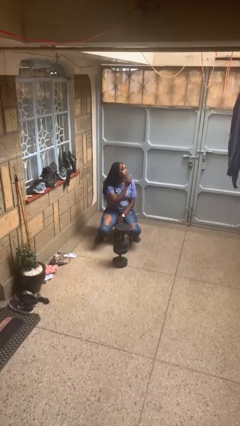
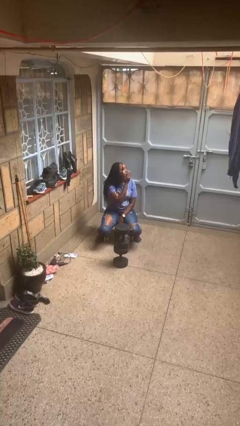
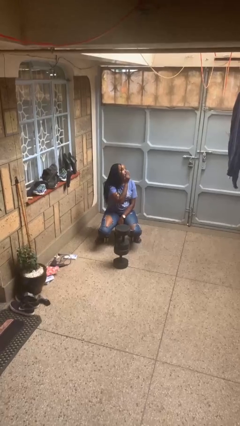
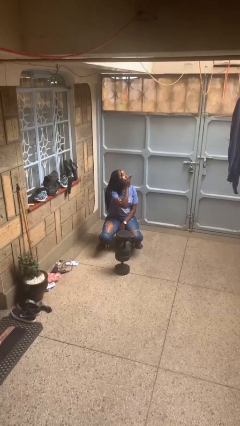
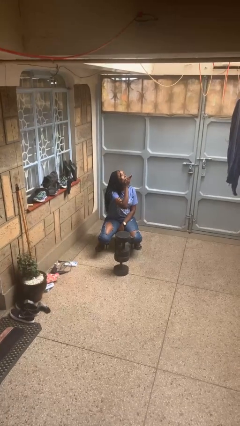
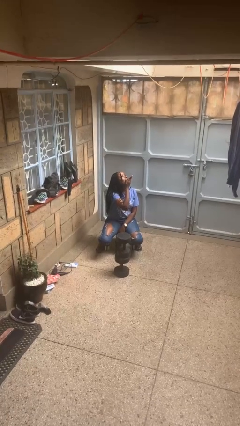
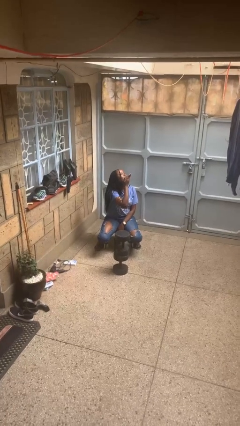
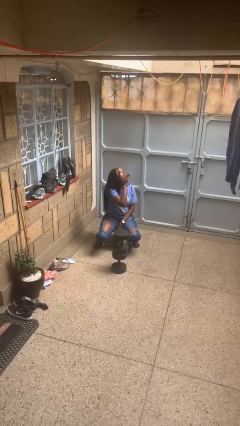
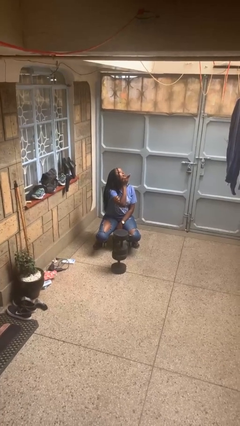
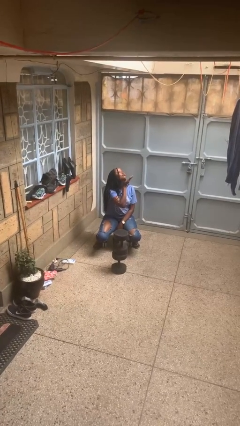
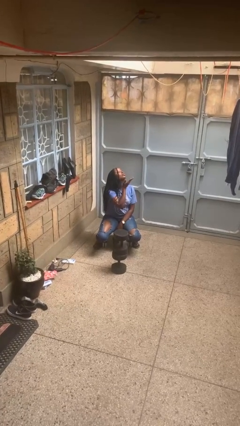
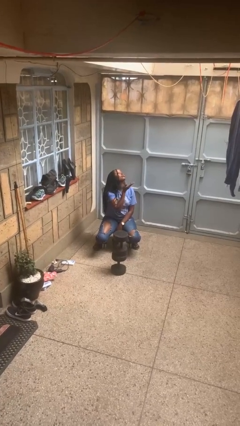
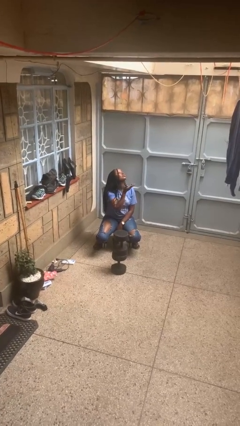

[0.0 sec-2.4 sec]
person gestures blow kiss

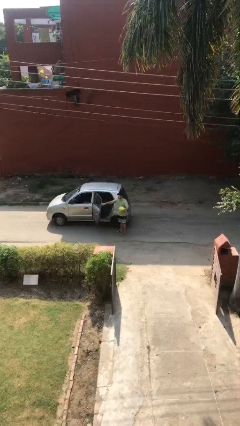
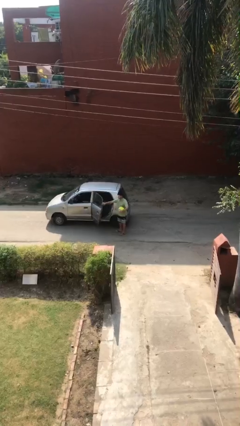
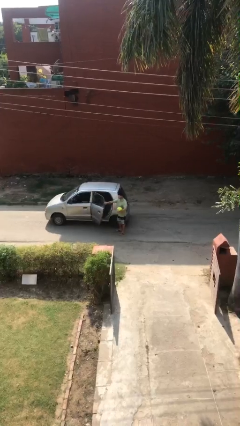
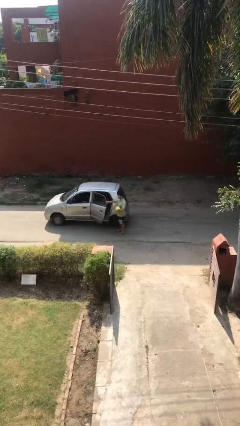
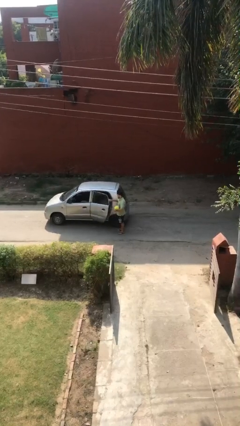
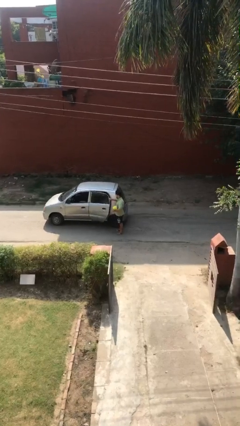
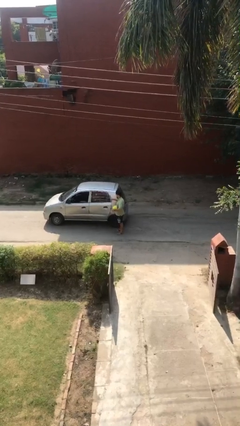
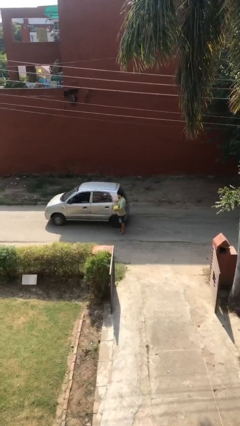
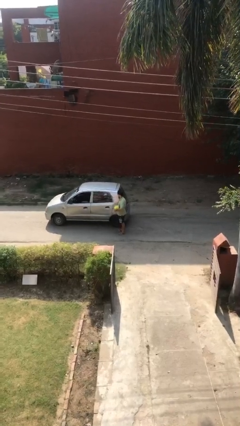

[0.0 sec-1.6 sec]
person closes car door

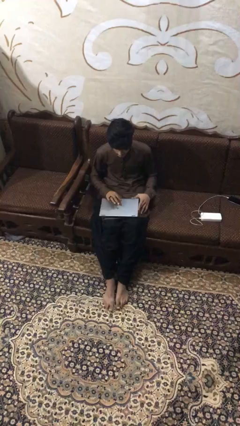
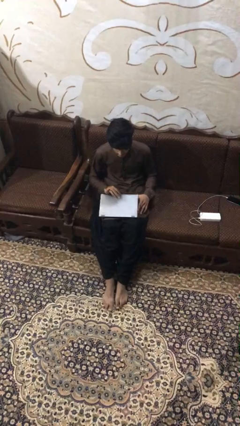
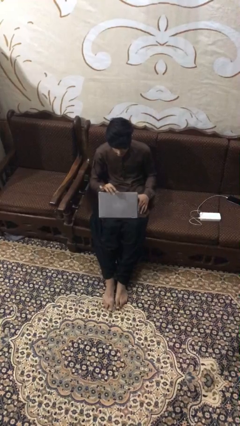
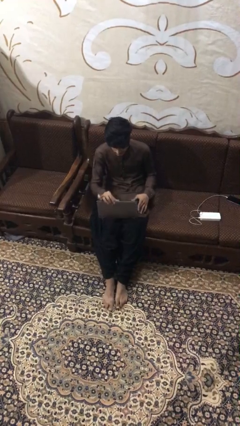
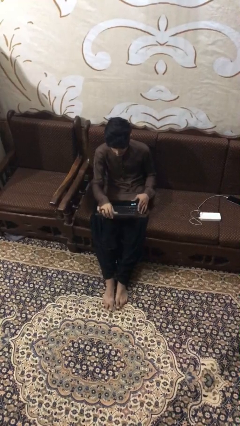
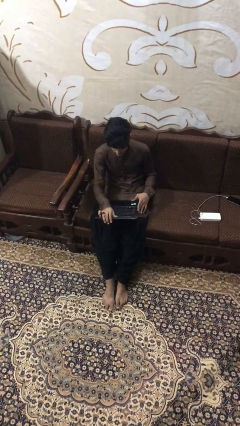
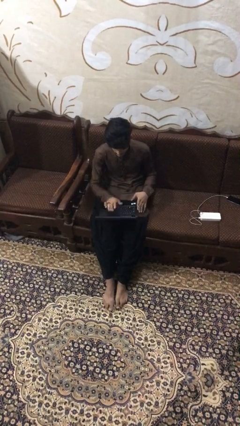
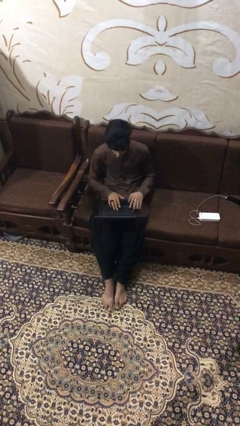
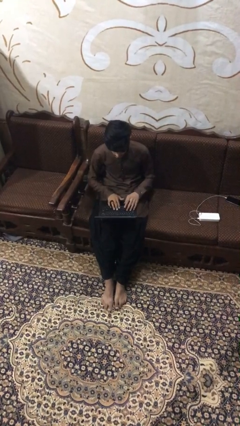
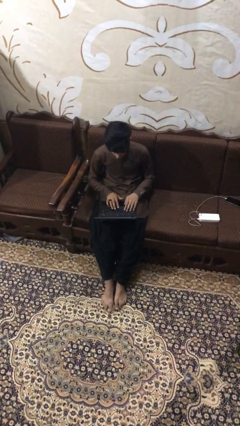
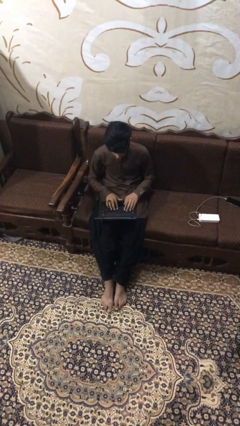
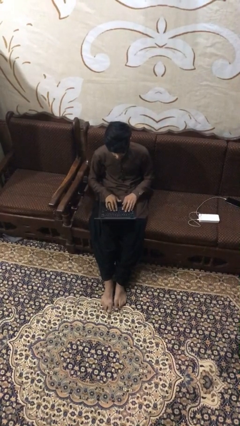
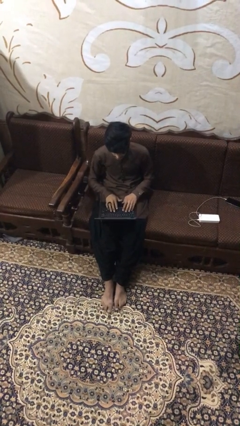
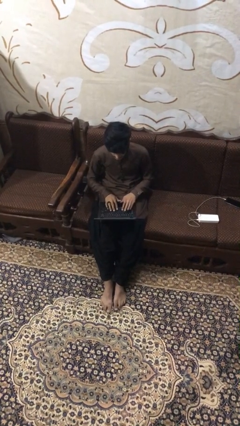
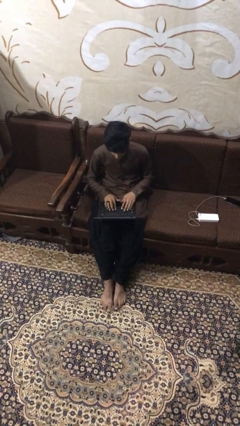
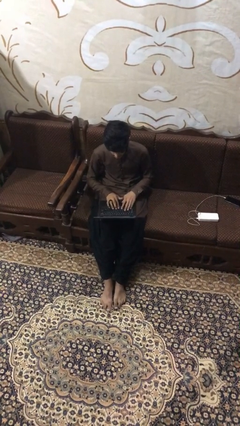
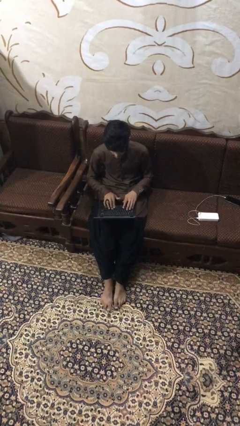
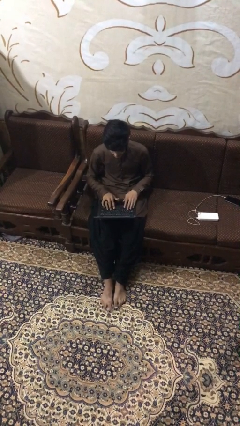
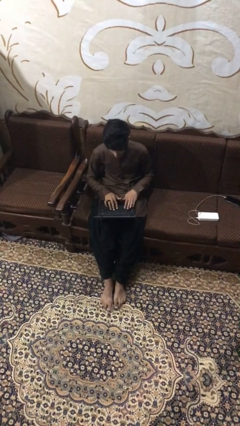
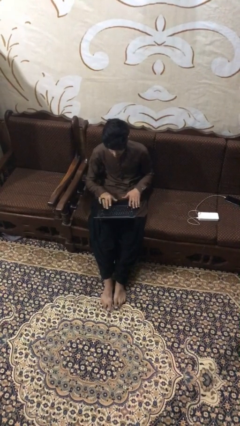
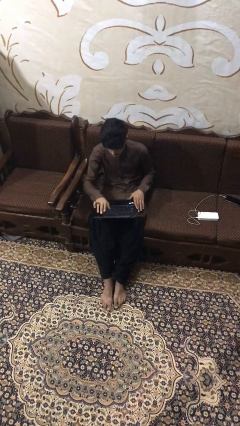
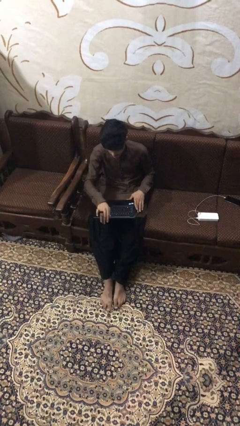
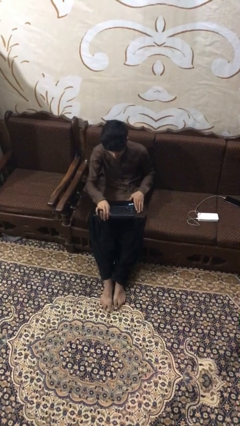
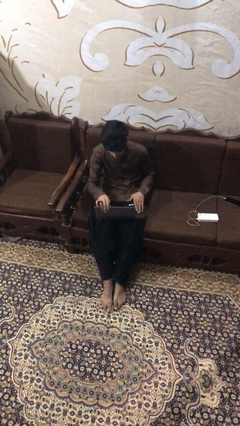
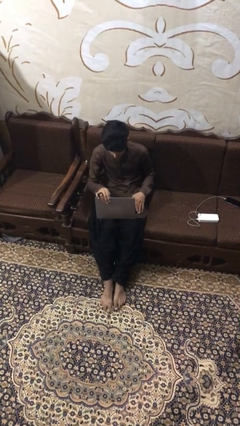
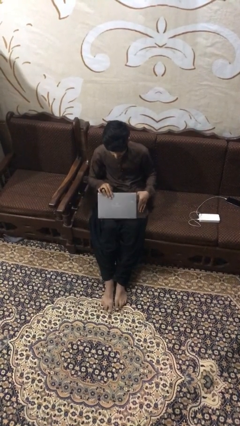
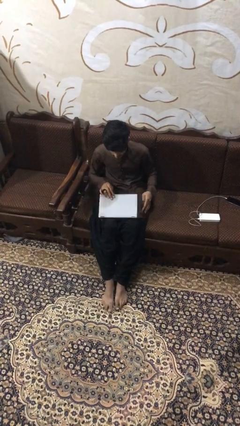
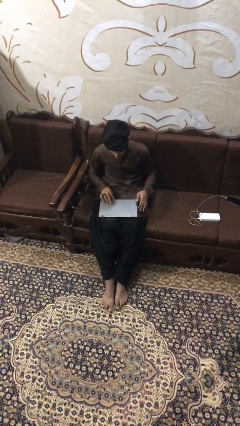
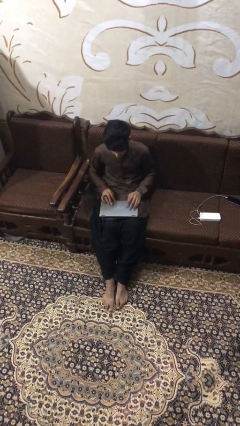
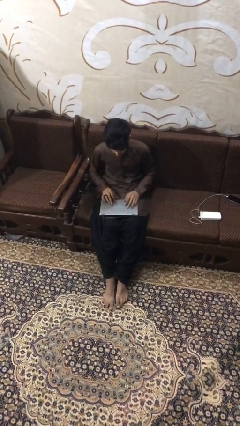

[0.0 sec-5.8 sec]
person interacts with laptop

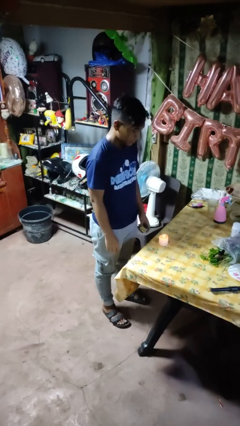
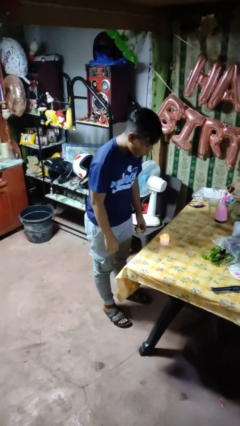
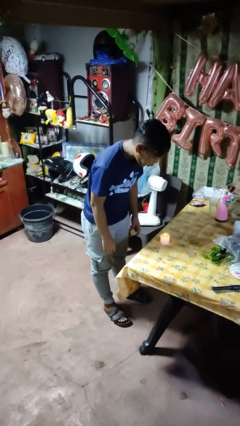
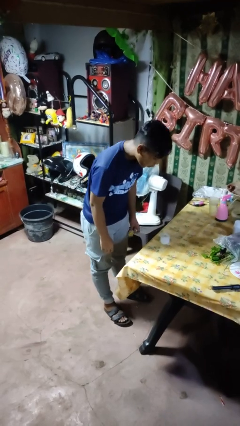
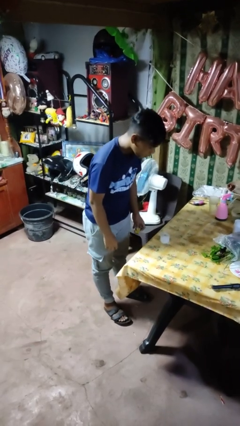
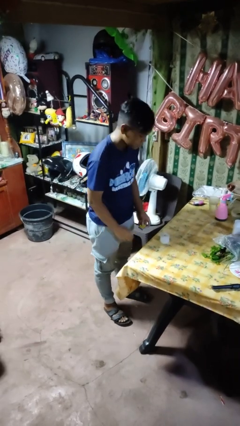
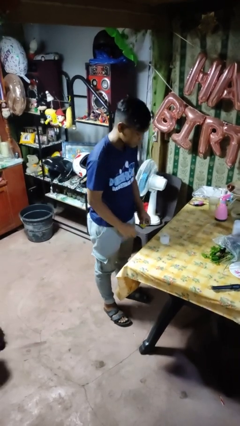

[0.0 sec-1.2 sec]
person extinguishes candle

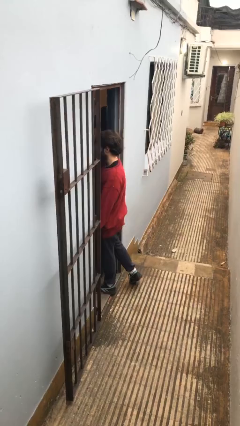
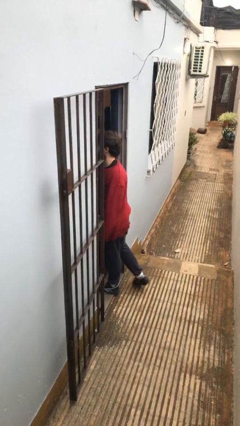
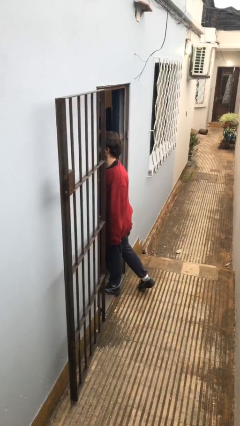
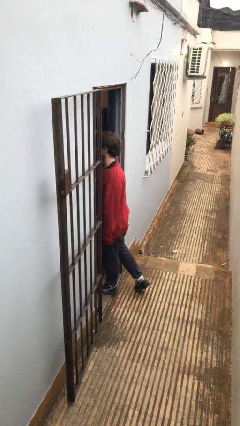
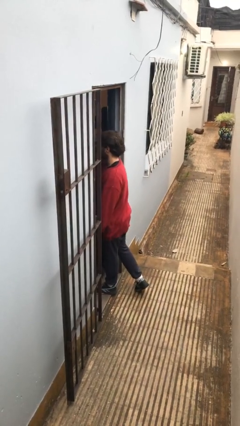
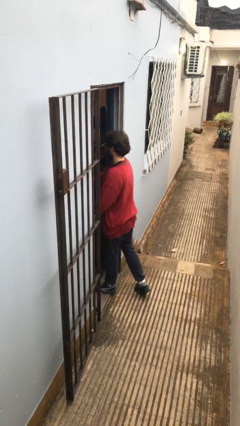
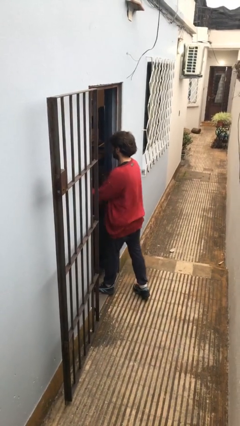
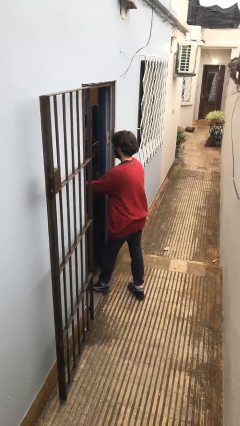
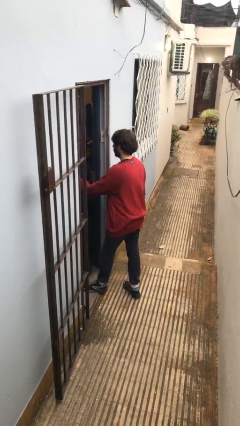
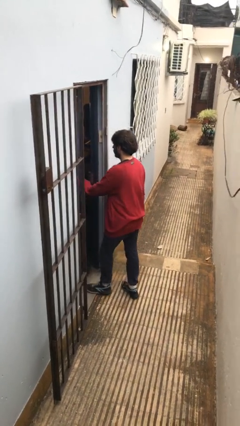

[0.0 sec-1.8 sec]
person closes facility door

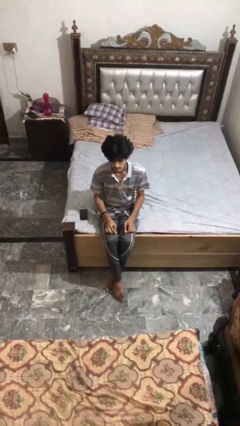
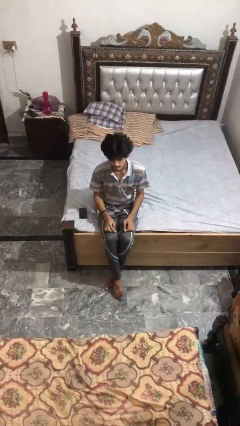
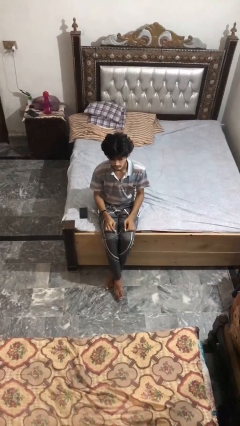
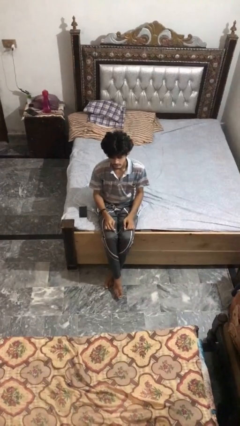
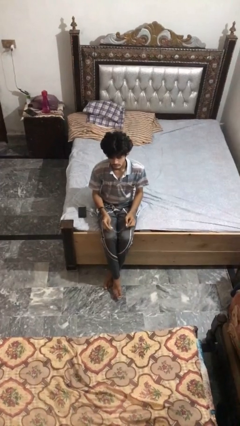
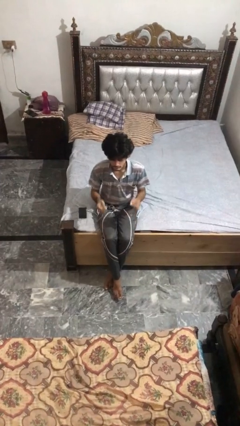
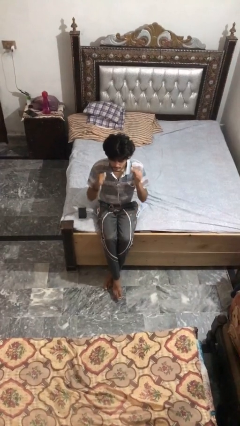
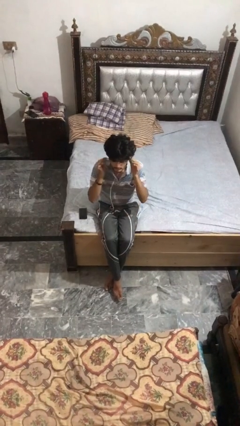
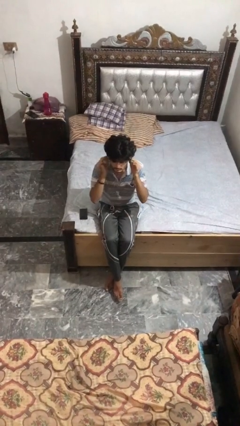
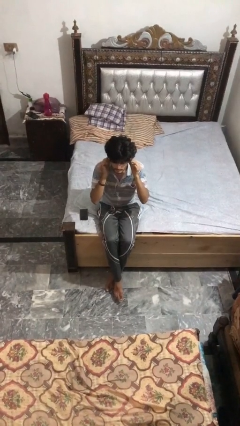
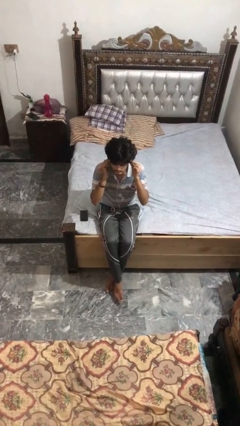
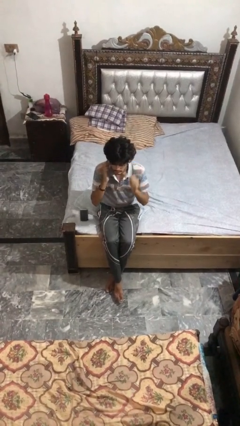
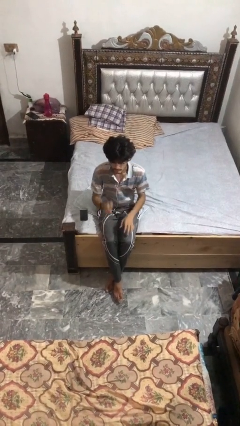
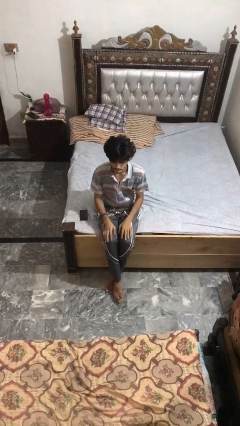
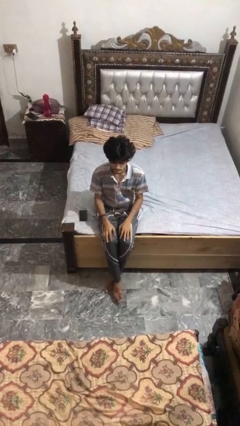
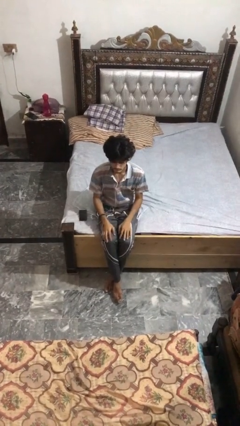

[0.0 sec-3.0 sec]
person puts on headphones

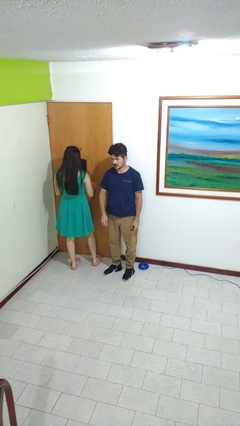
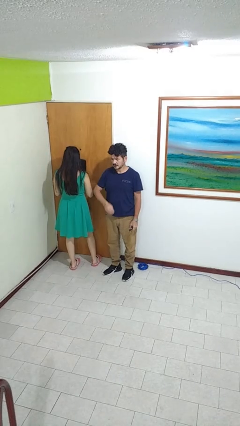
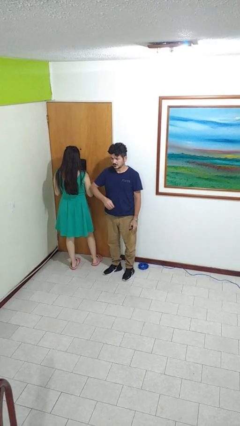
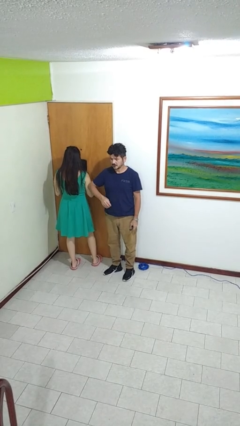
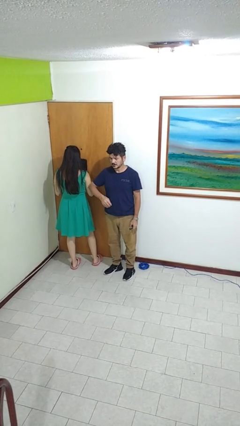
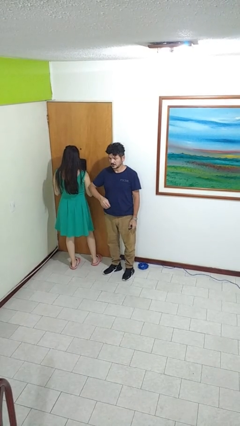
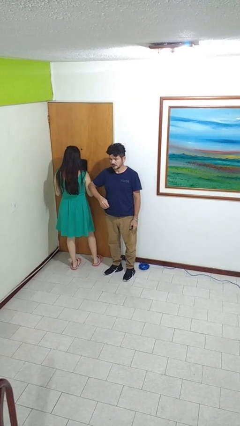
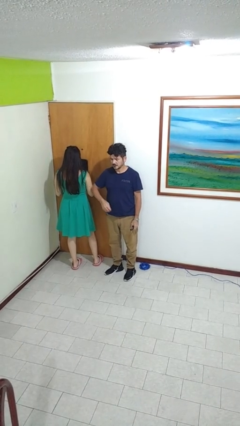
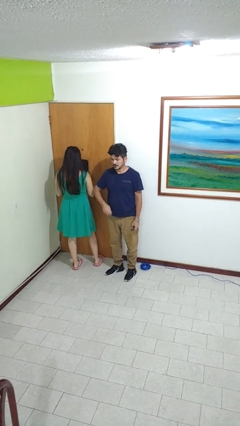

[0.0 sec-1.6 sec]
person nudges person with elbow
